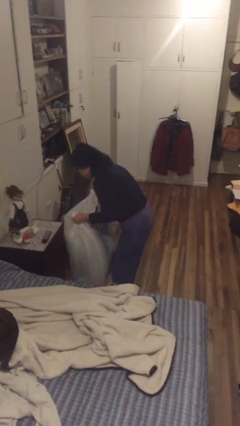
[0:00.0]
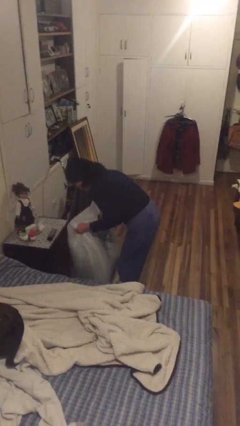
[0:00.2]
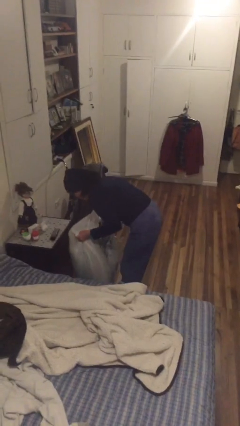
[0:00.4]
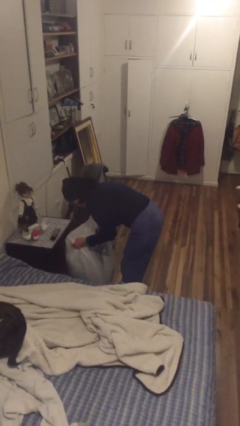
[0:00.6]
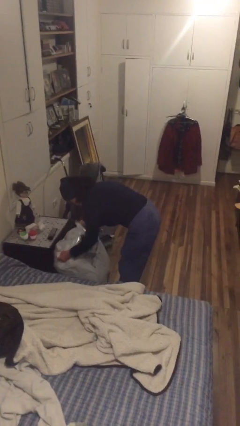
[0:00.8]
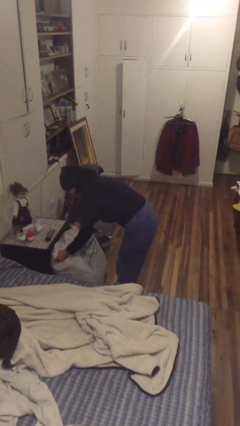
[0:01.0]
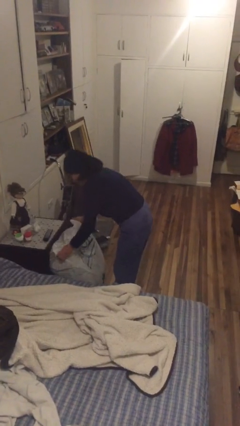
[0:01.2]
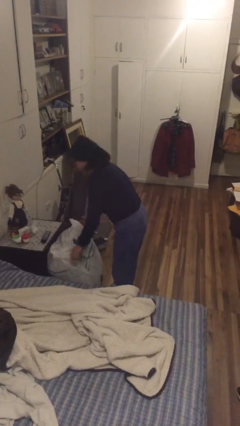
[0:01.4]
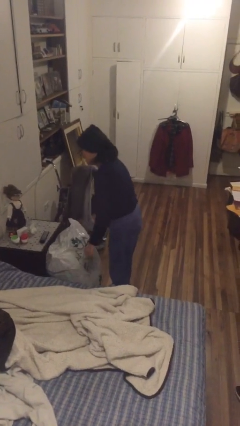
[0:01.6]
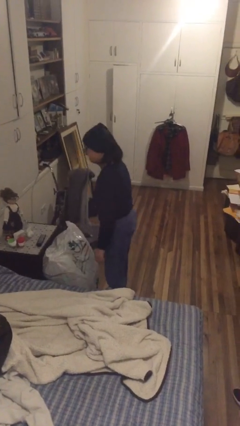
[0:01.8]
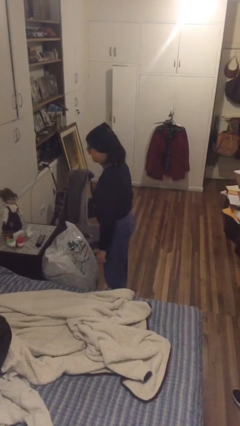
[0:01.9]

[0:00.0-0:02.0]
person puts down object on floor

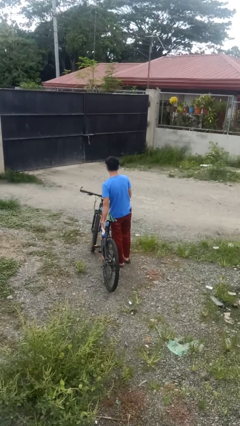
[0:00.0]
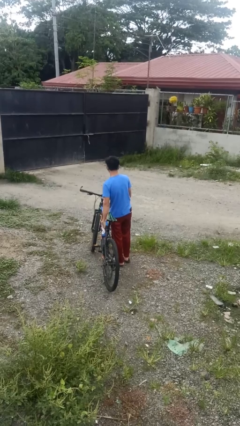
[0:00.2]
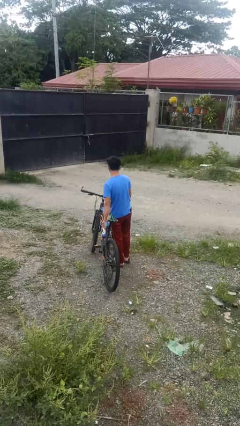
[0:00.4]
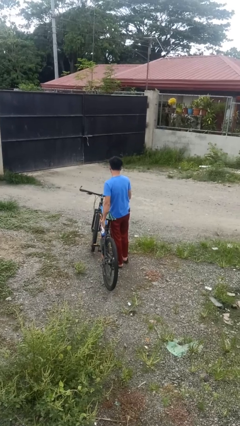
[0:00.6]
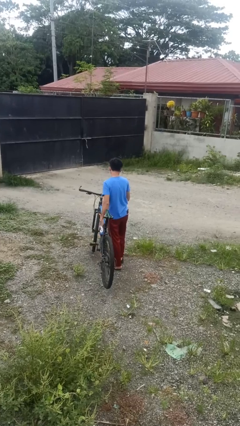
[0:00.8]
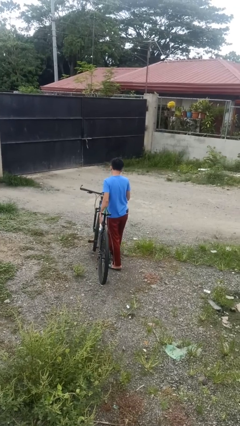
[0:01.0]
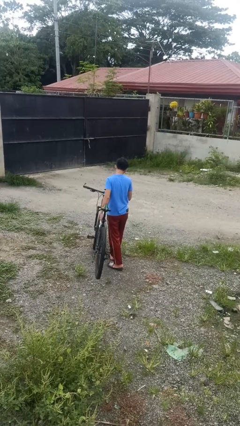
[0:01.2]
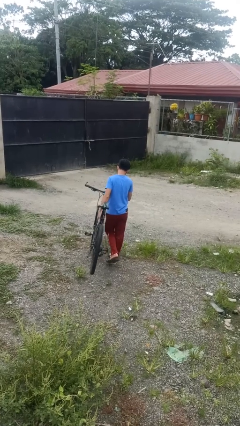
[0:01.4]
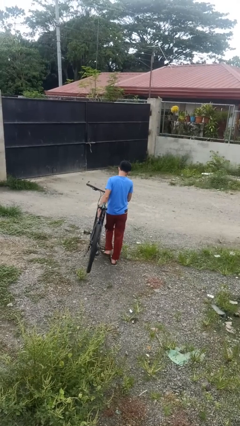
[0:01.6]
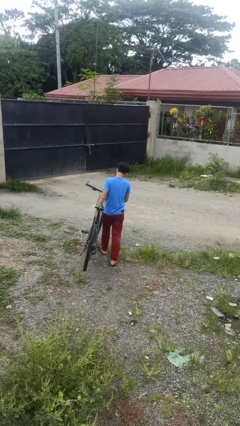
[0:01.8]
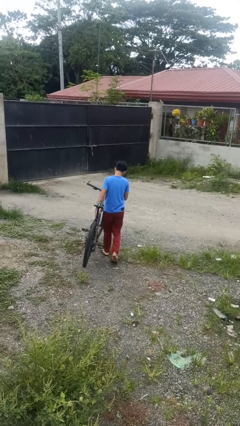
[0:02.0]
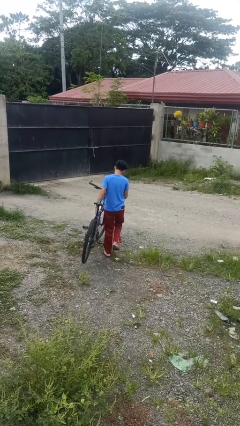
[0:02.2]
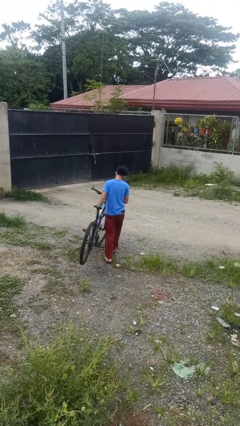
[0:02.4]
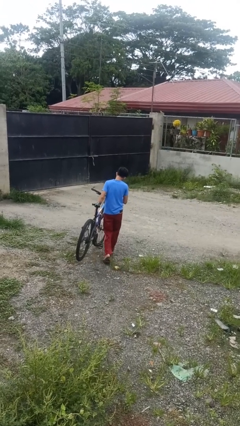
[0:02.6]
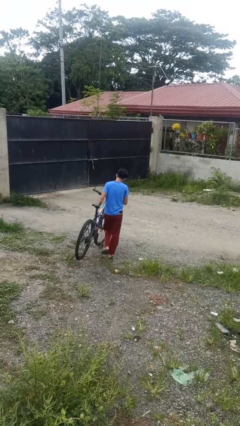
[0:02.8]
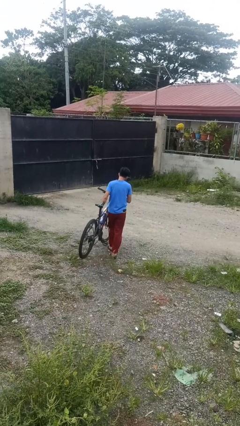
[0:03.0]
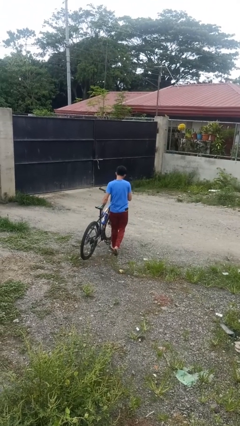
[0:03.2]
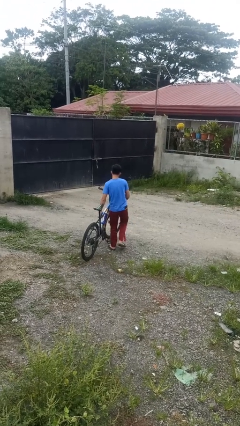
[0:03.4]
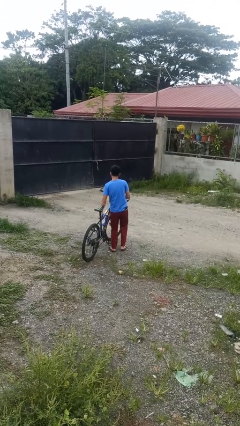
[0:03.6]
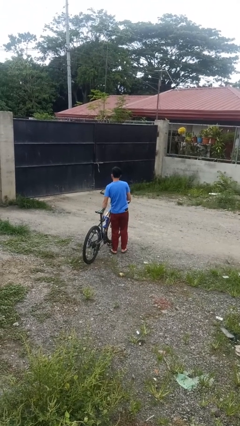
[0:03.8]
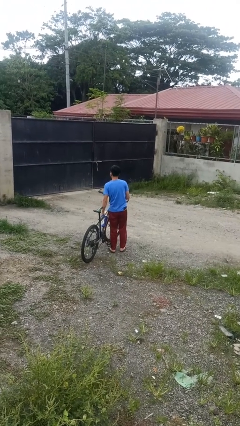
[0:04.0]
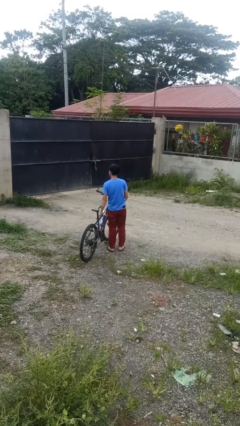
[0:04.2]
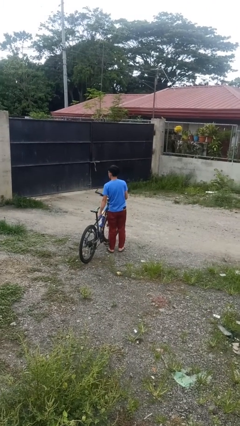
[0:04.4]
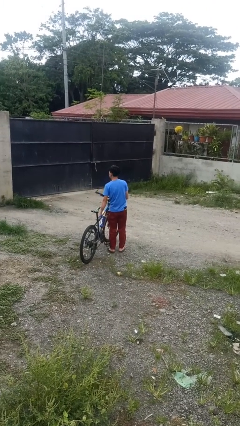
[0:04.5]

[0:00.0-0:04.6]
person carries bicycle

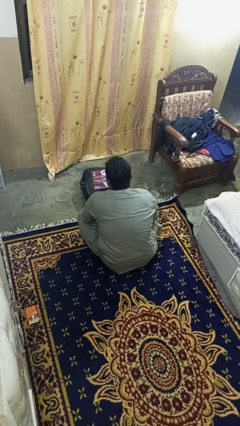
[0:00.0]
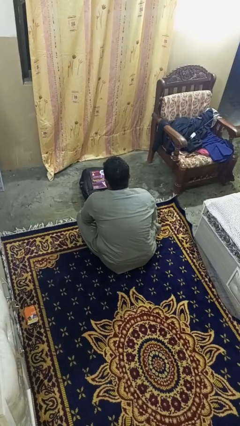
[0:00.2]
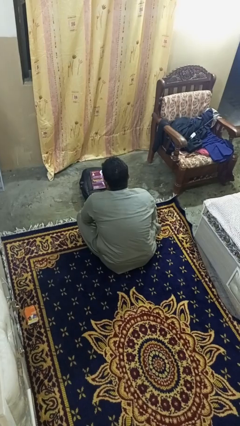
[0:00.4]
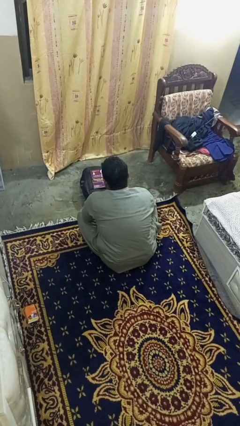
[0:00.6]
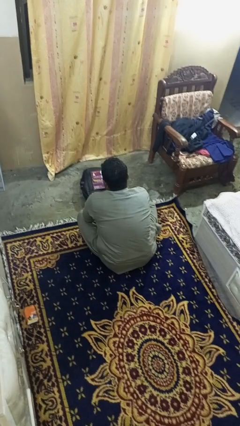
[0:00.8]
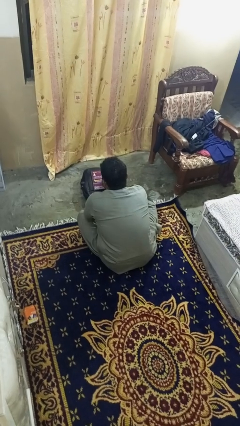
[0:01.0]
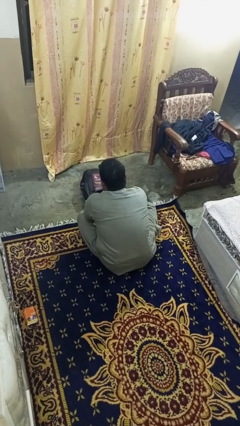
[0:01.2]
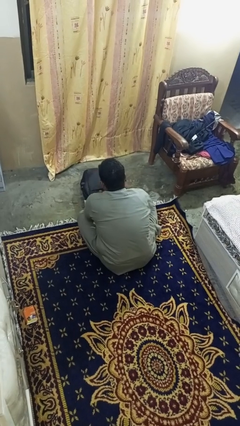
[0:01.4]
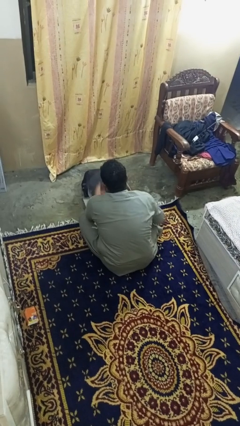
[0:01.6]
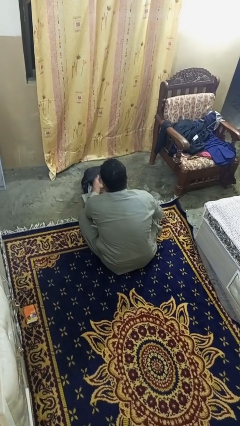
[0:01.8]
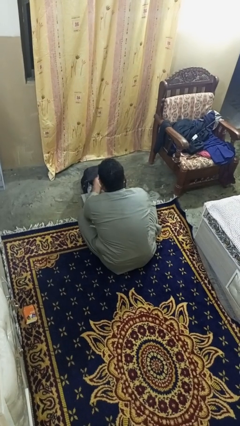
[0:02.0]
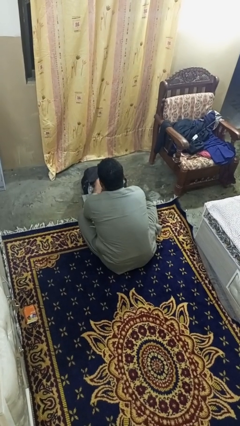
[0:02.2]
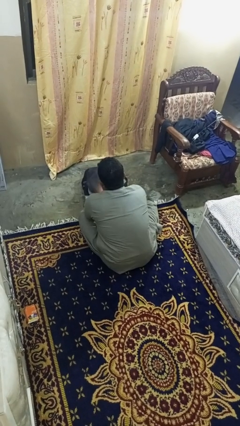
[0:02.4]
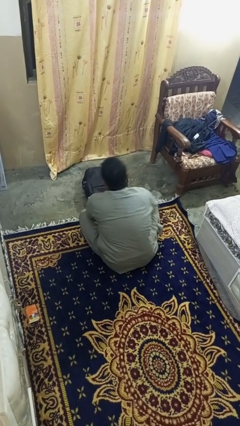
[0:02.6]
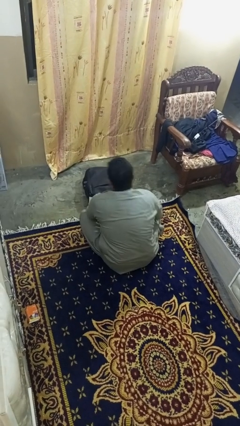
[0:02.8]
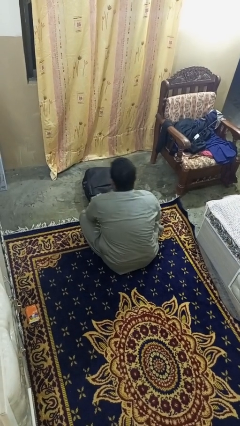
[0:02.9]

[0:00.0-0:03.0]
person puts object into bag

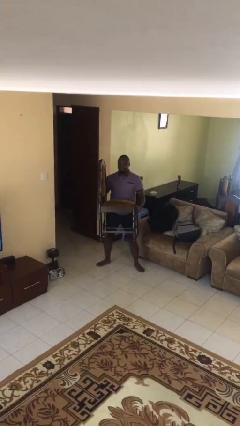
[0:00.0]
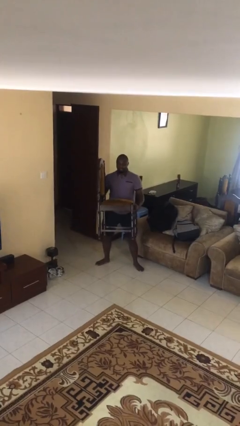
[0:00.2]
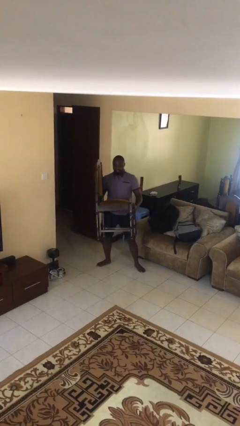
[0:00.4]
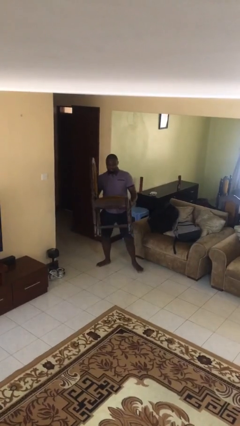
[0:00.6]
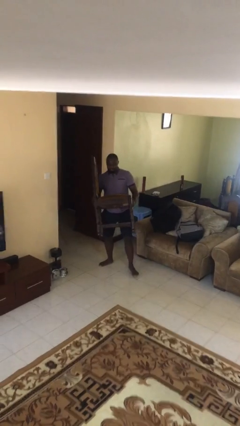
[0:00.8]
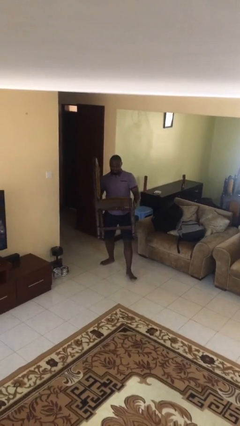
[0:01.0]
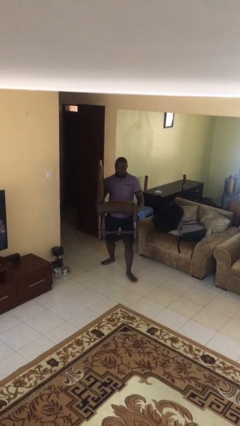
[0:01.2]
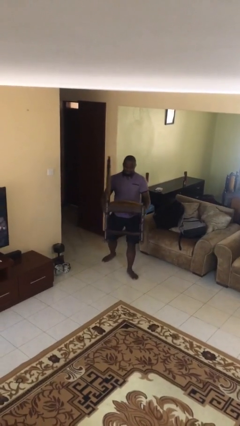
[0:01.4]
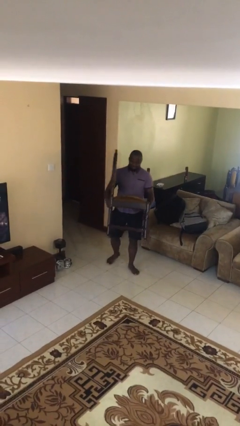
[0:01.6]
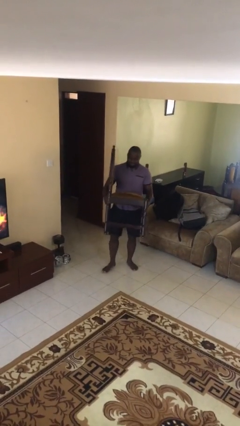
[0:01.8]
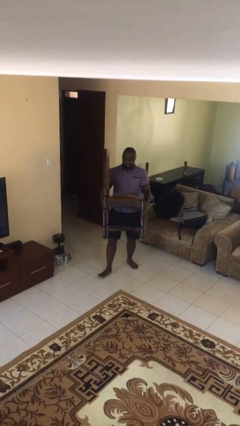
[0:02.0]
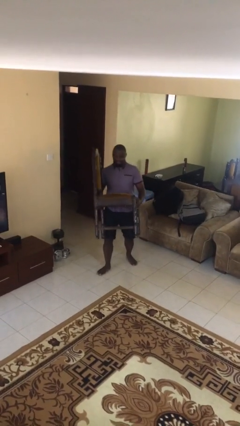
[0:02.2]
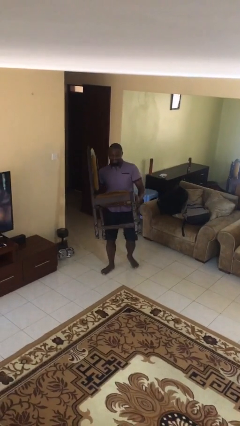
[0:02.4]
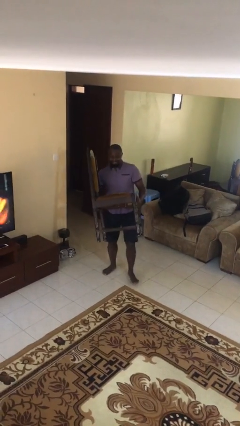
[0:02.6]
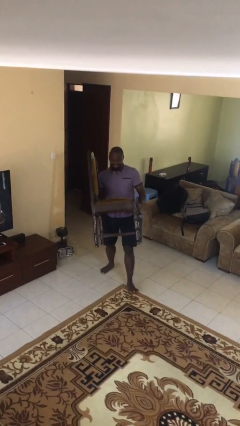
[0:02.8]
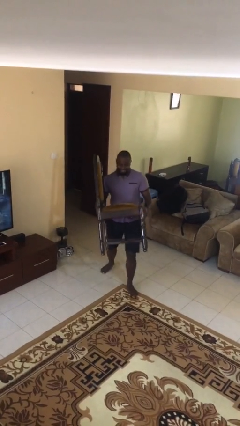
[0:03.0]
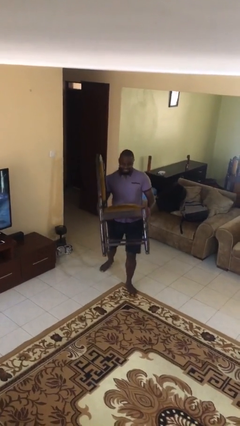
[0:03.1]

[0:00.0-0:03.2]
person carries heavy object

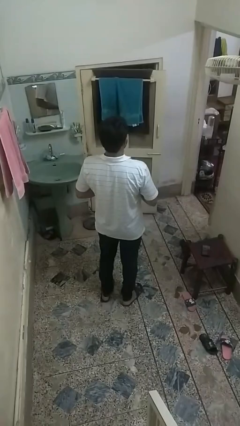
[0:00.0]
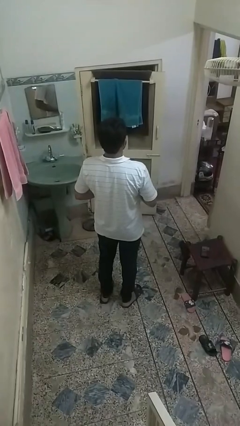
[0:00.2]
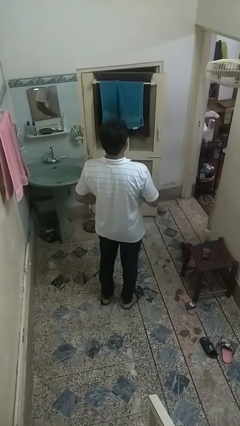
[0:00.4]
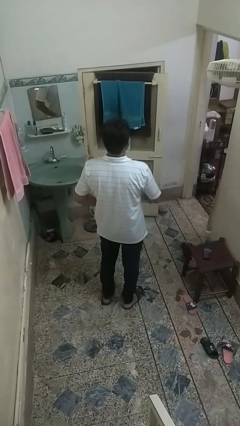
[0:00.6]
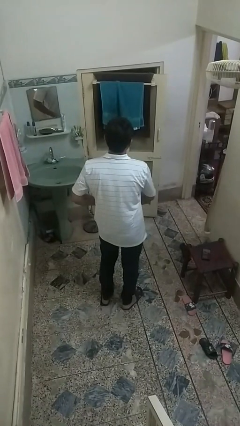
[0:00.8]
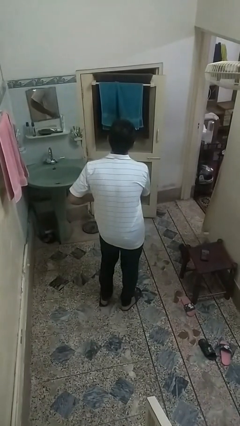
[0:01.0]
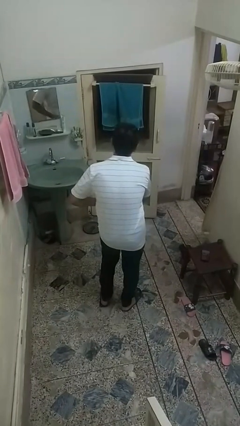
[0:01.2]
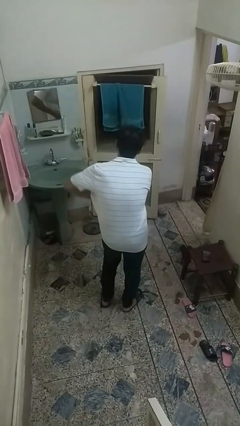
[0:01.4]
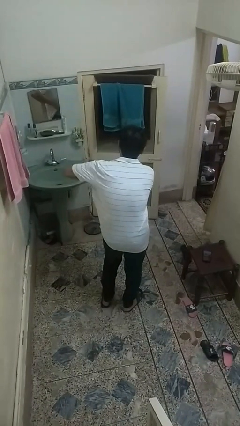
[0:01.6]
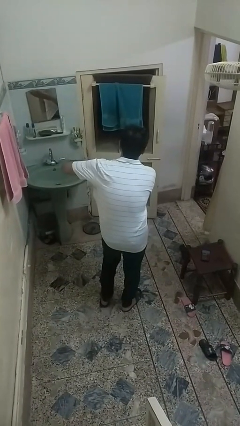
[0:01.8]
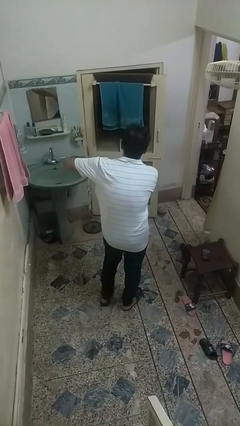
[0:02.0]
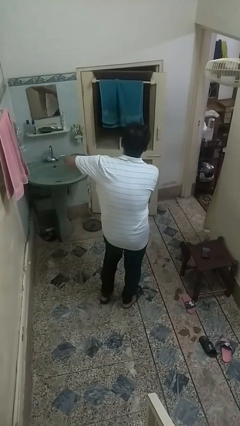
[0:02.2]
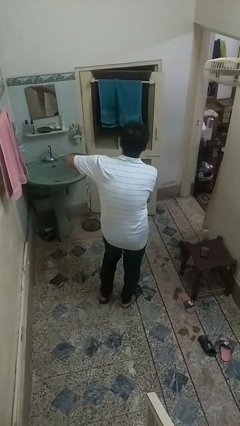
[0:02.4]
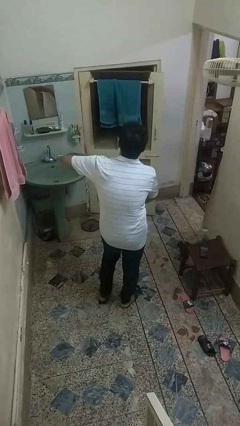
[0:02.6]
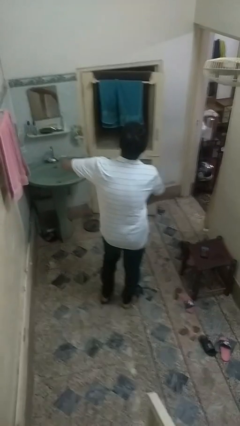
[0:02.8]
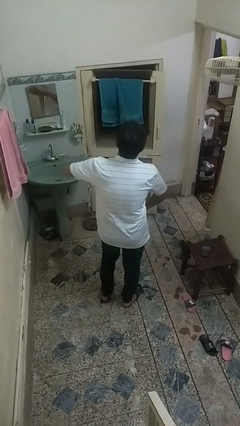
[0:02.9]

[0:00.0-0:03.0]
person applies deodorant

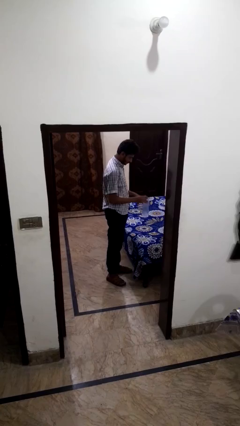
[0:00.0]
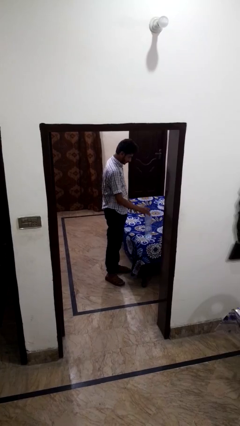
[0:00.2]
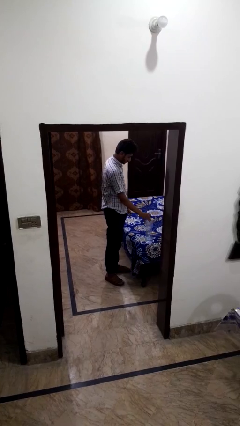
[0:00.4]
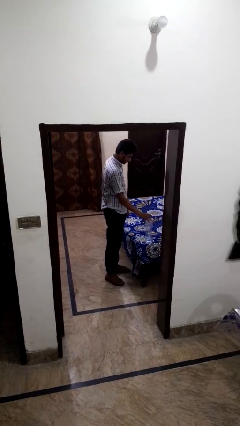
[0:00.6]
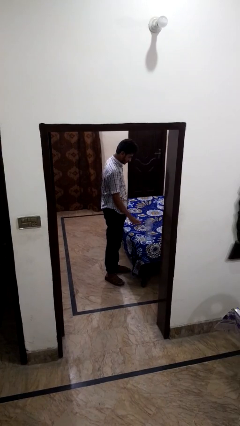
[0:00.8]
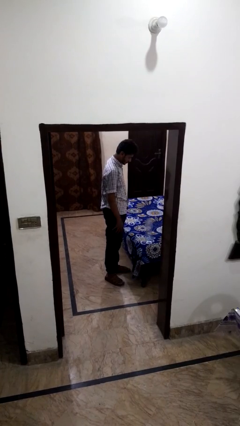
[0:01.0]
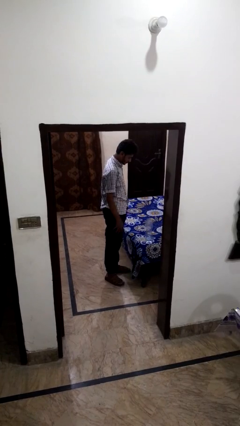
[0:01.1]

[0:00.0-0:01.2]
person puts down object on bed

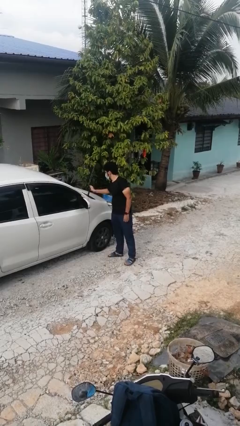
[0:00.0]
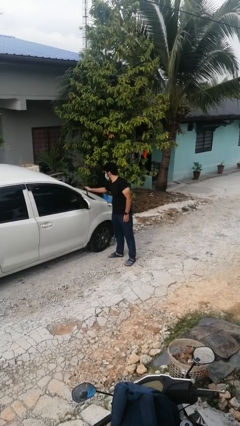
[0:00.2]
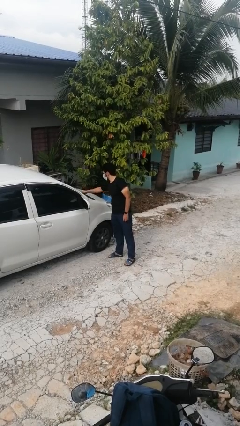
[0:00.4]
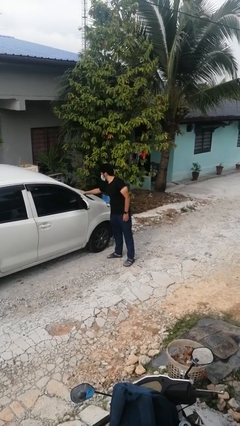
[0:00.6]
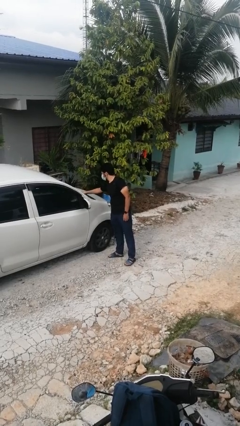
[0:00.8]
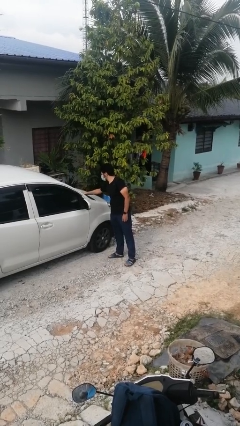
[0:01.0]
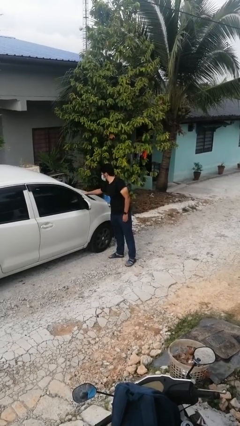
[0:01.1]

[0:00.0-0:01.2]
person flips down car wipers
